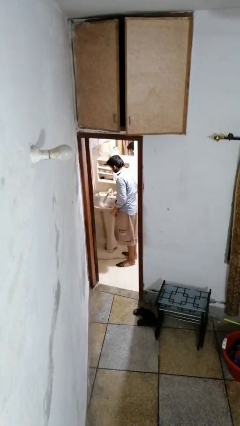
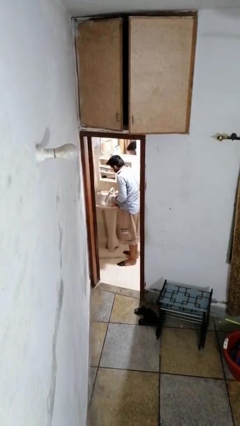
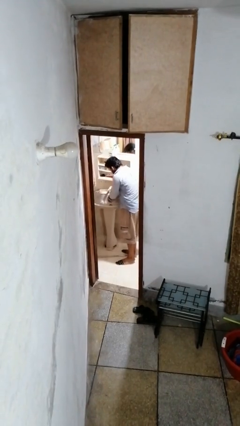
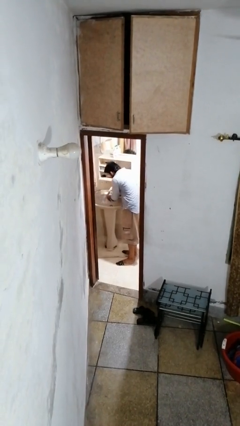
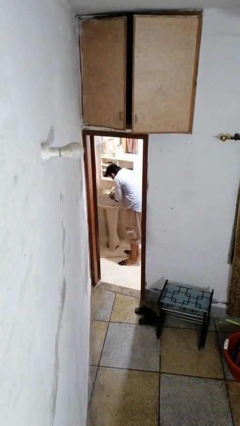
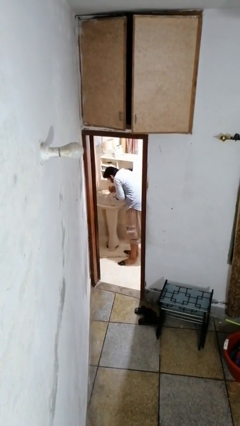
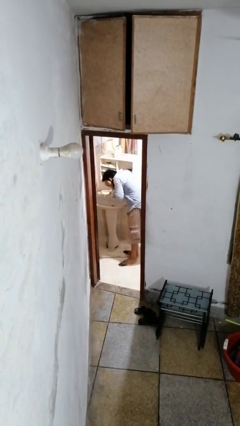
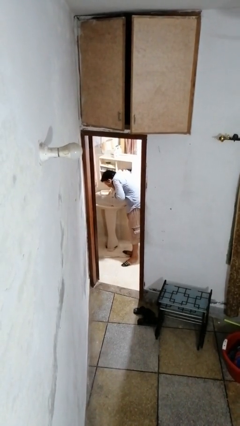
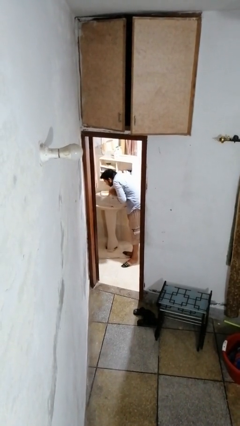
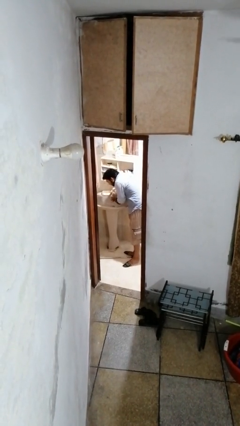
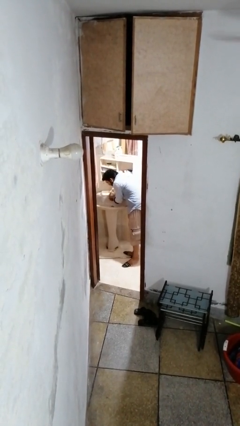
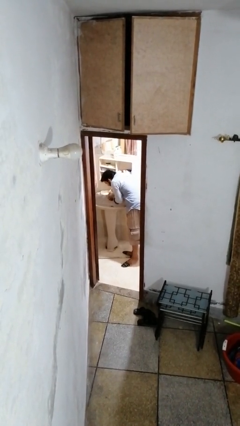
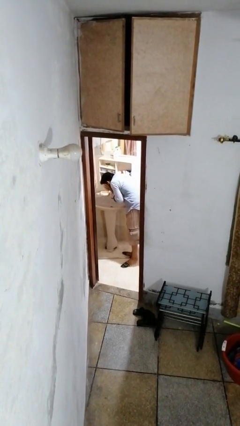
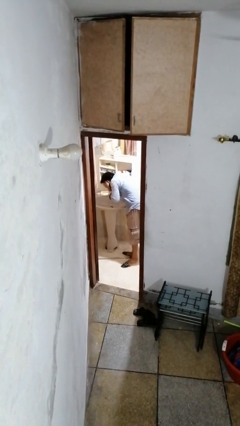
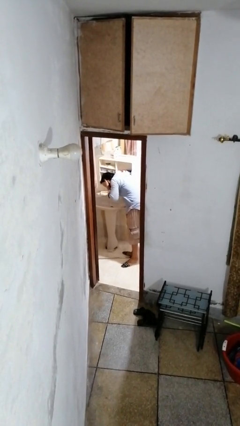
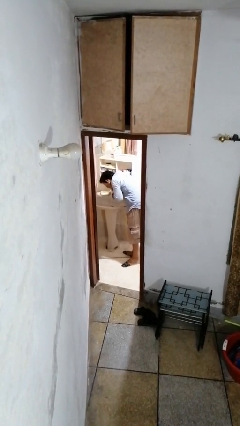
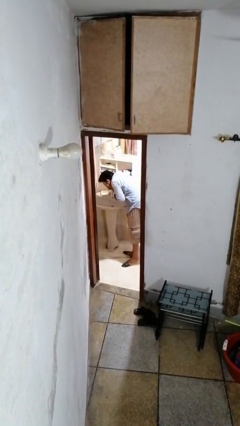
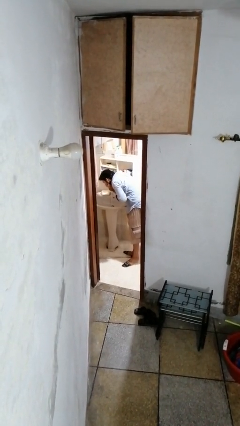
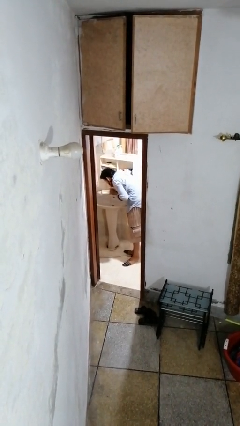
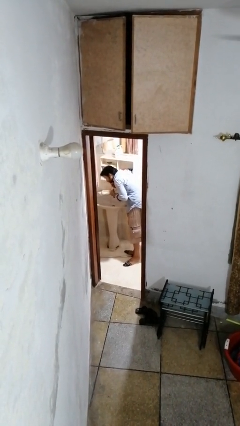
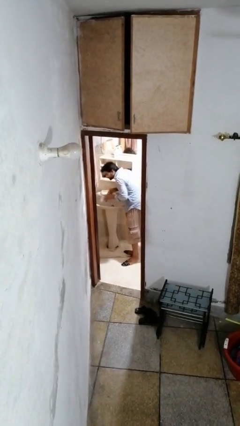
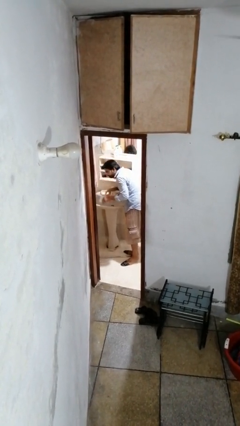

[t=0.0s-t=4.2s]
person washes face

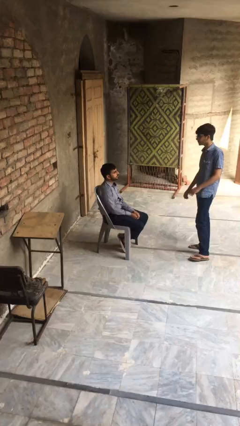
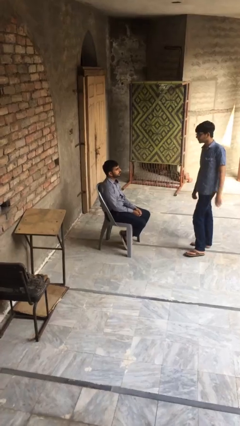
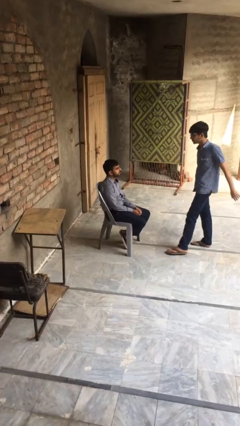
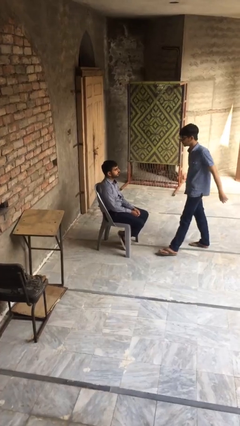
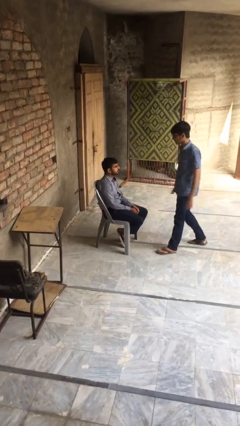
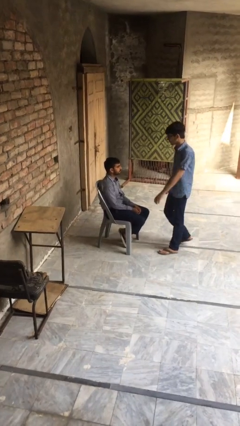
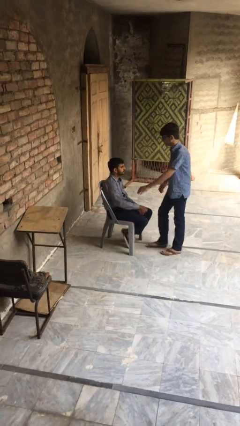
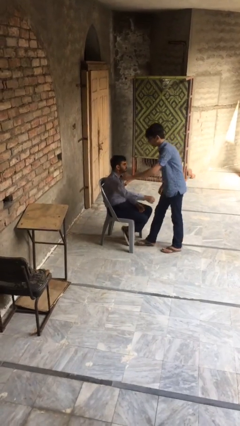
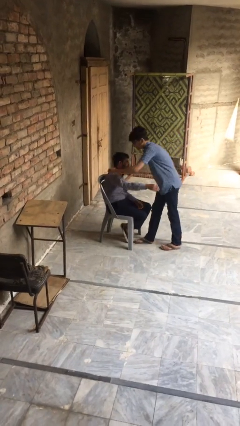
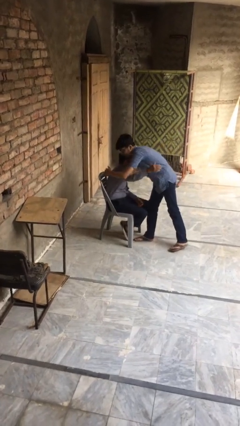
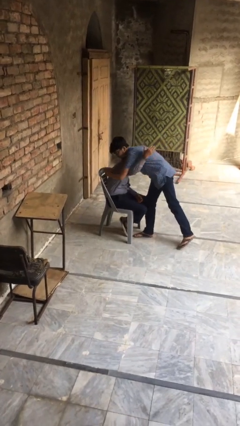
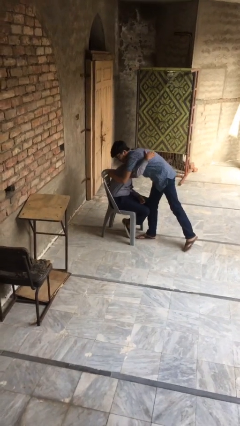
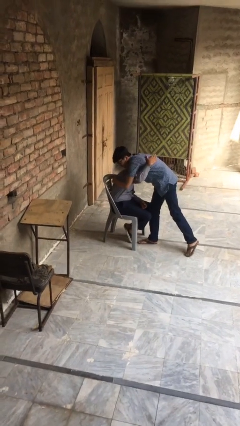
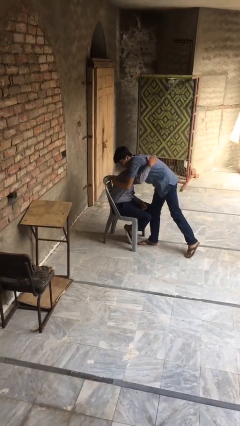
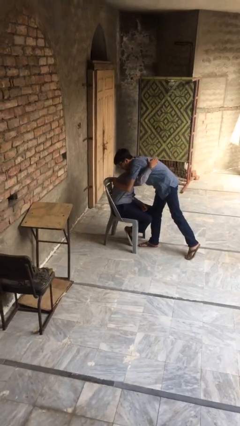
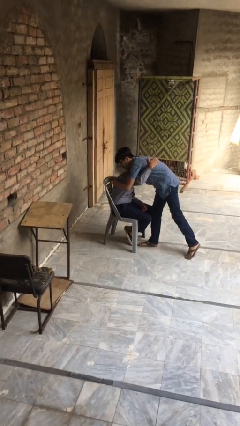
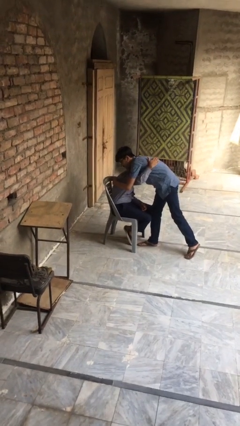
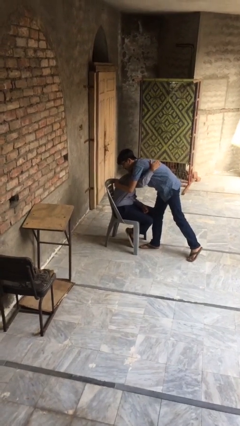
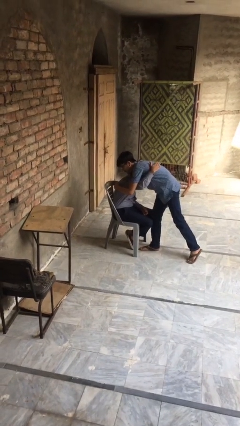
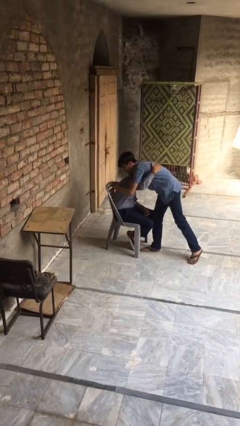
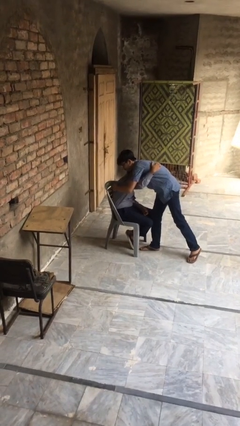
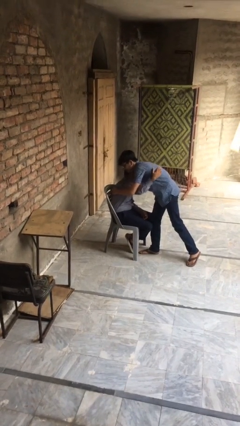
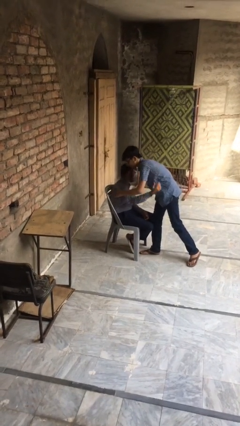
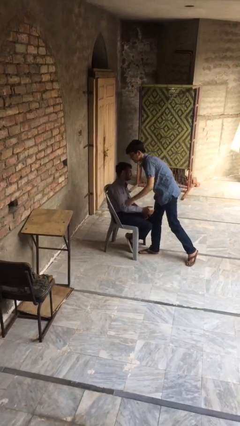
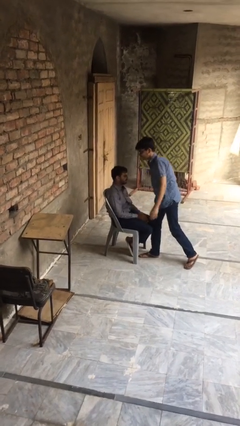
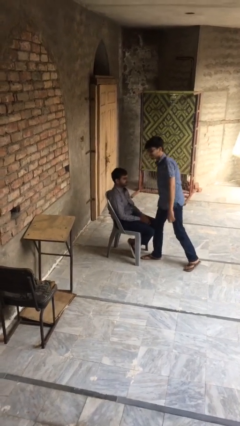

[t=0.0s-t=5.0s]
person embraces person

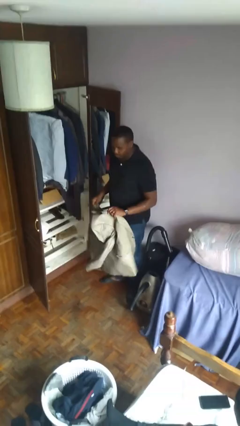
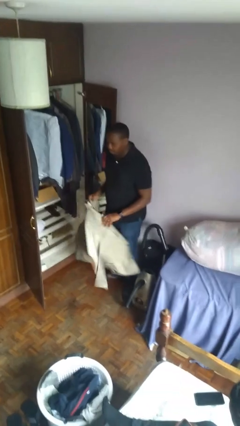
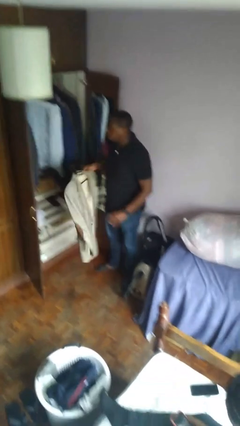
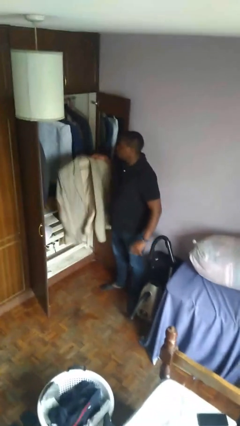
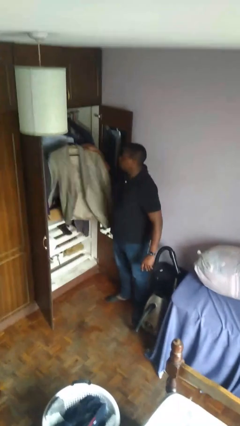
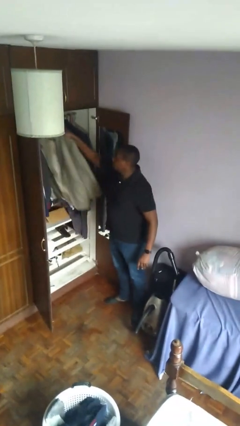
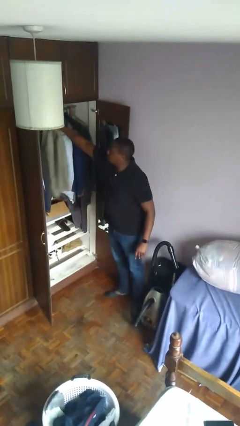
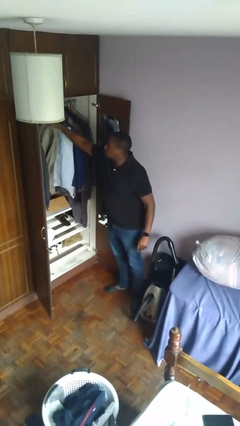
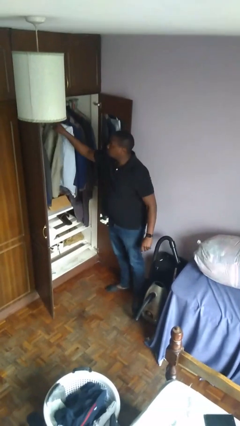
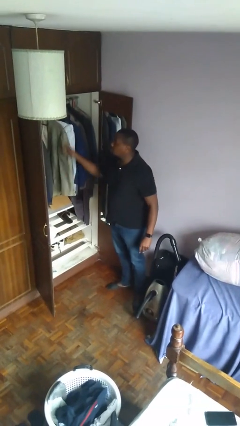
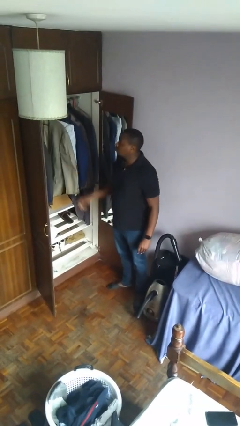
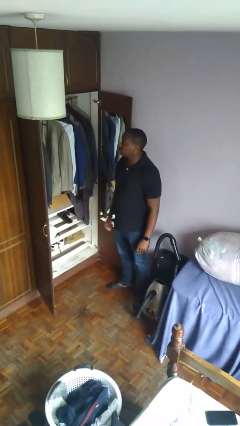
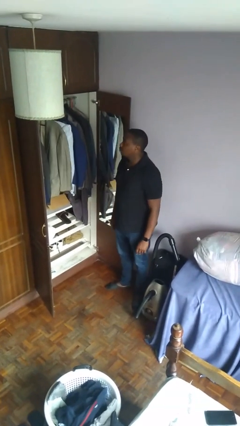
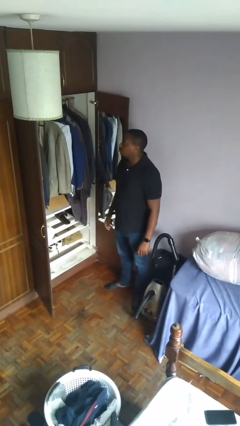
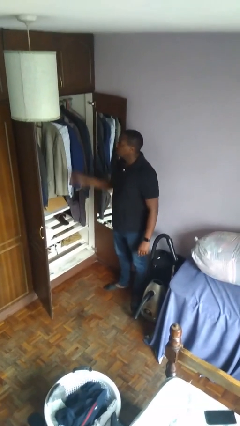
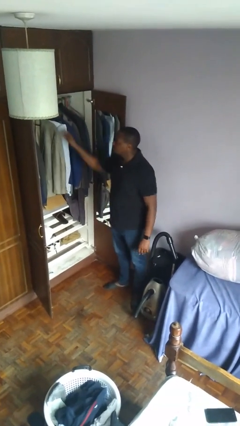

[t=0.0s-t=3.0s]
person puts clothes into closet

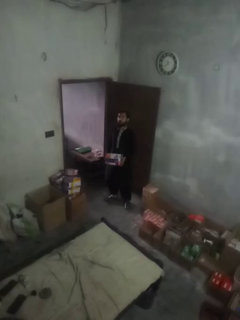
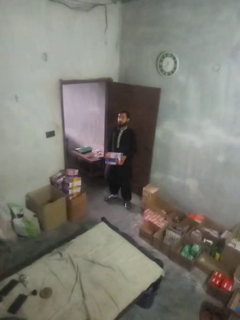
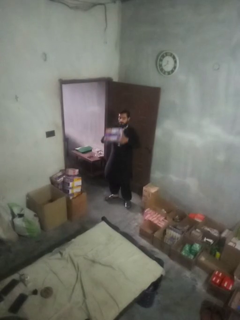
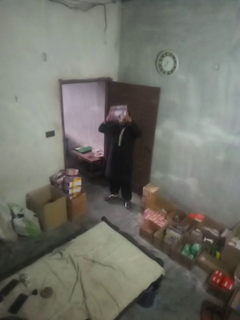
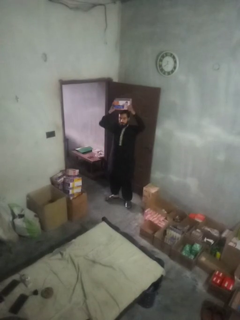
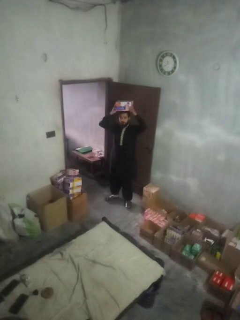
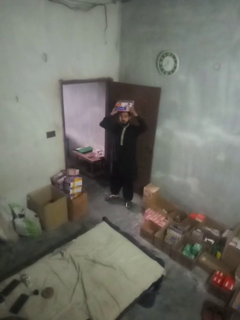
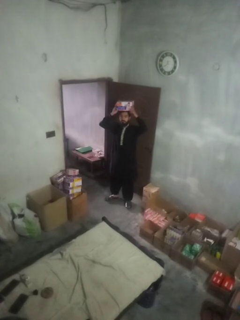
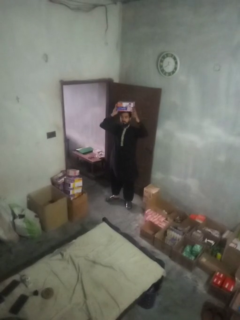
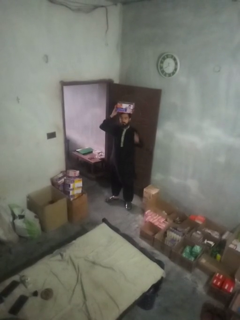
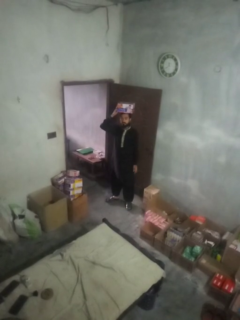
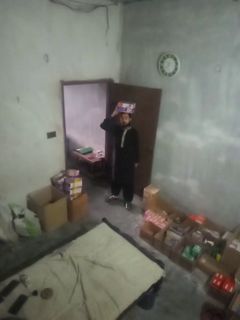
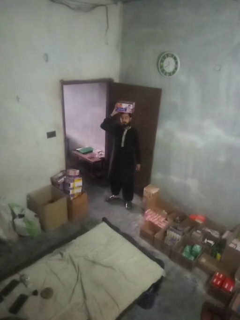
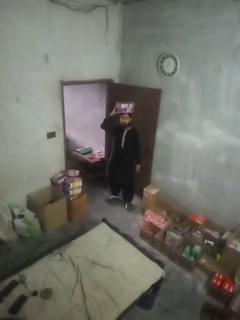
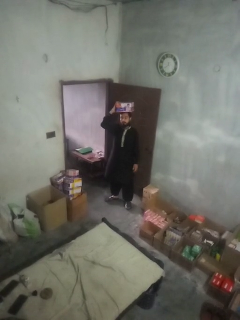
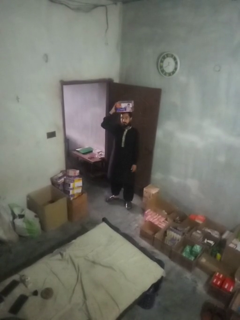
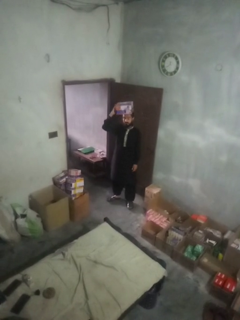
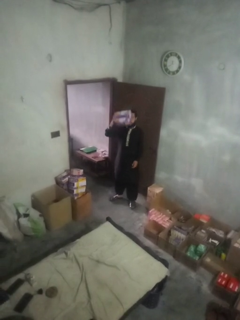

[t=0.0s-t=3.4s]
person holds object above head

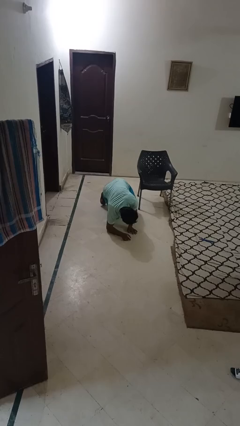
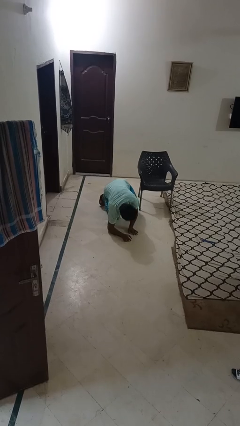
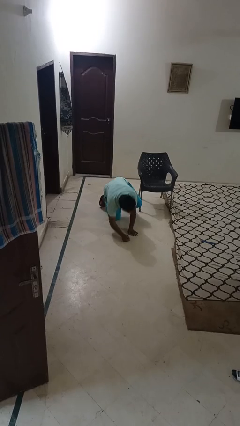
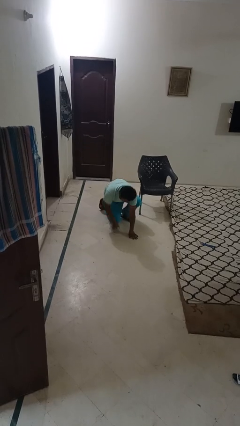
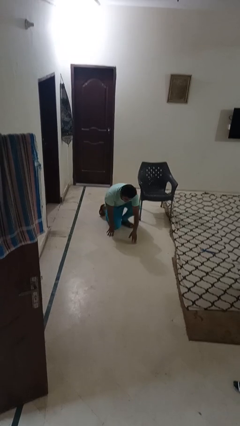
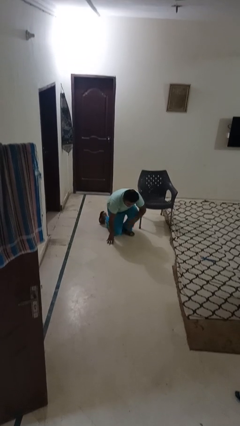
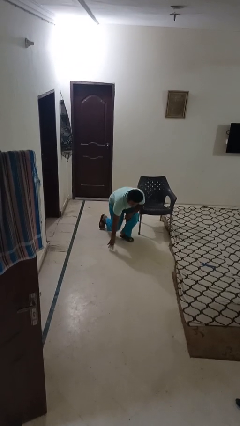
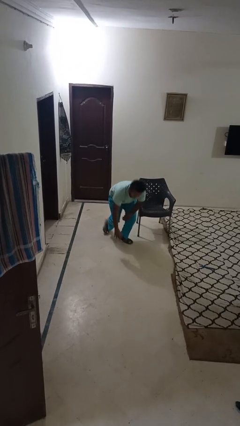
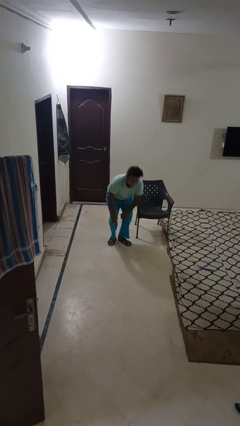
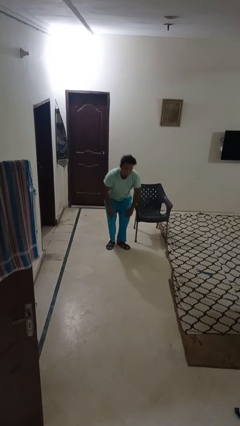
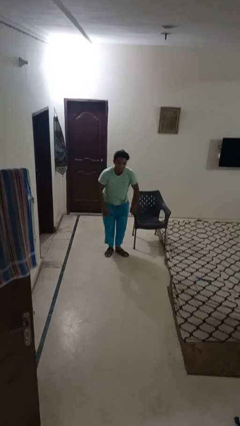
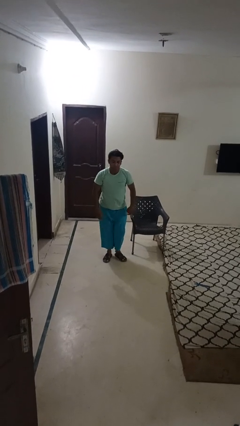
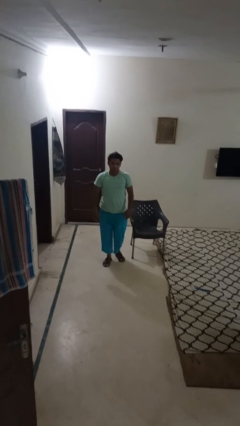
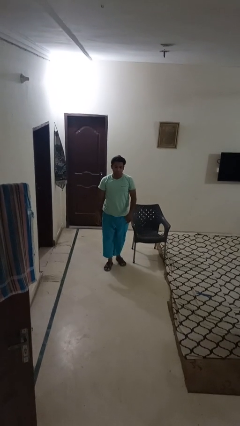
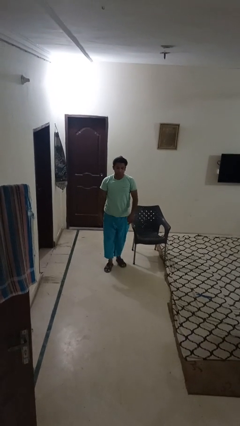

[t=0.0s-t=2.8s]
person stands up from floor
